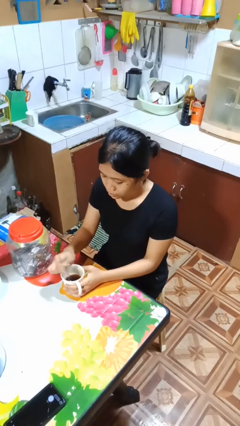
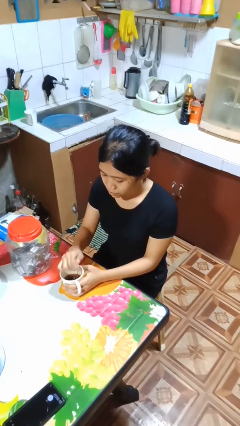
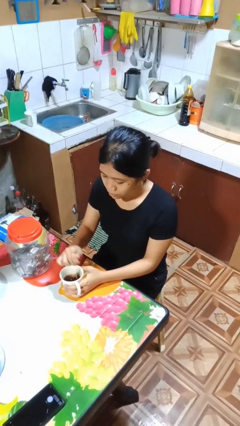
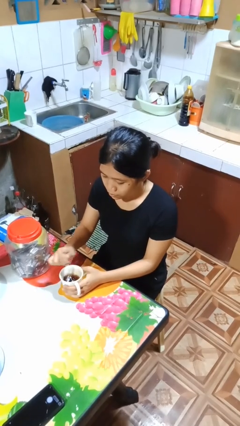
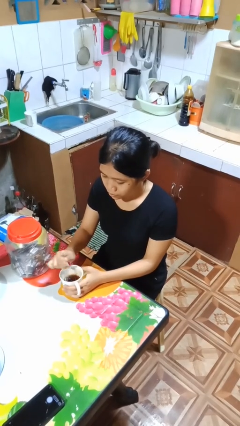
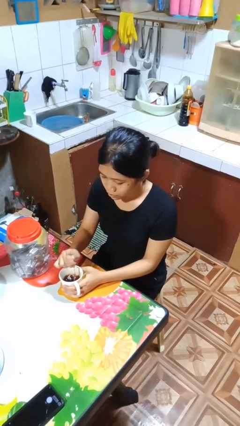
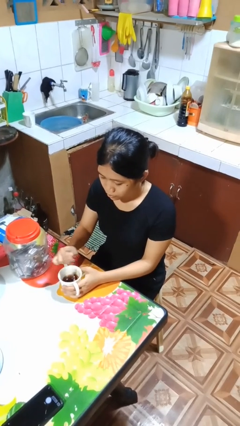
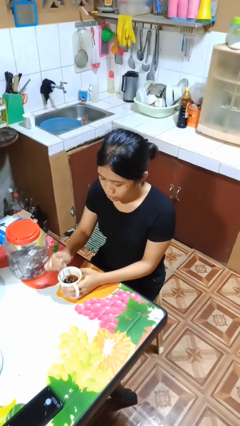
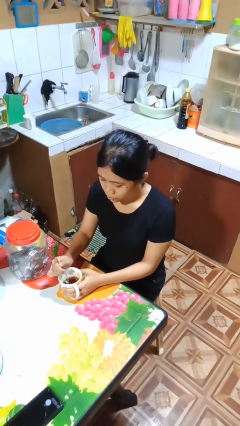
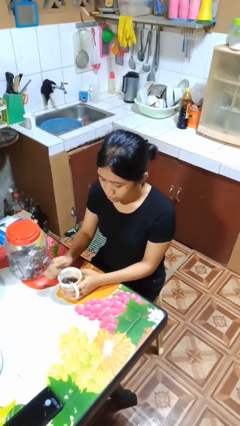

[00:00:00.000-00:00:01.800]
person stirs mug

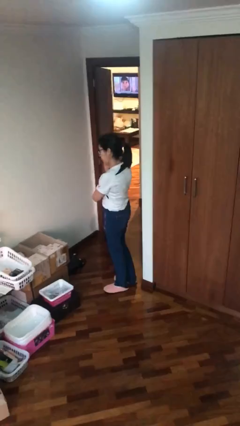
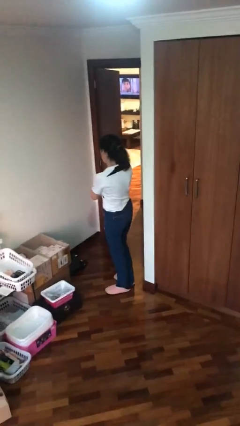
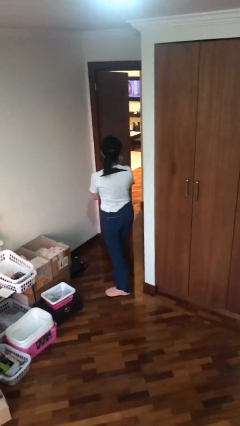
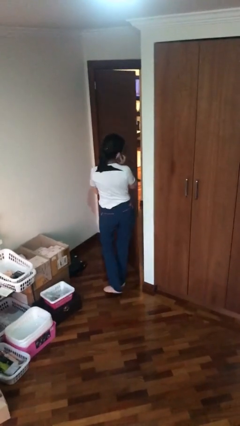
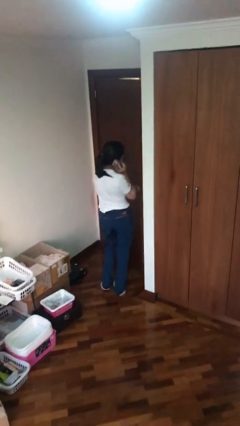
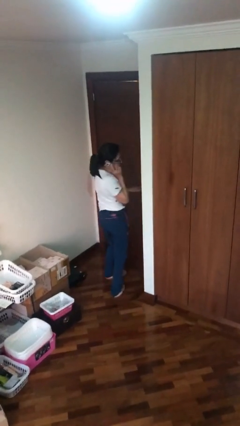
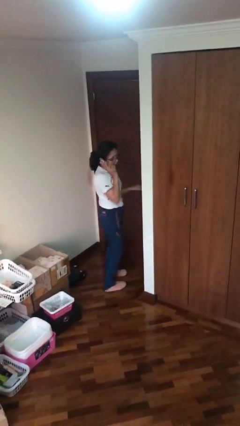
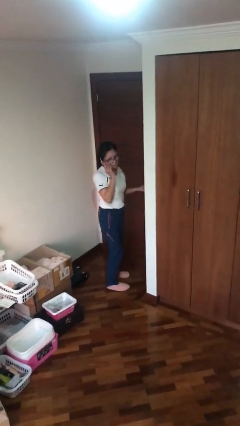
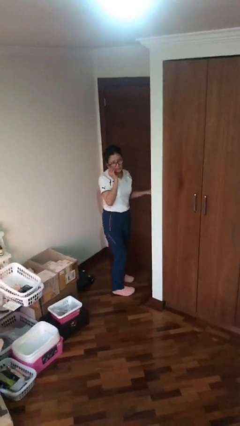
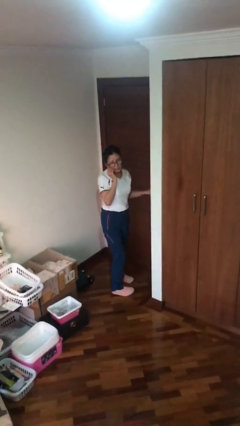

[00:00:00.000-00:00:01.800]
person closes facility door

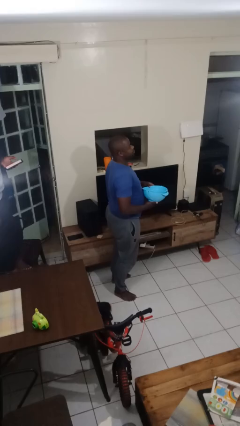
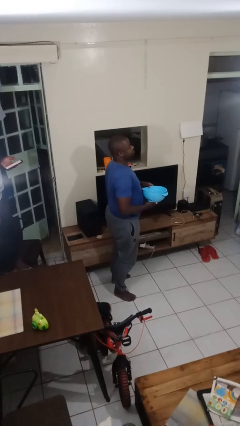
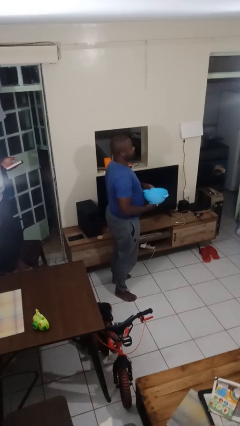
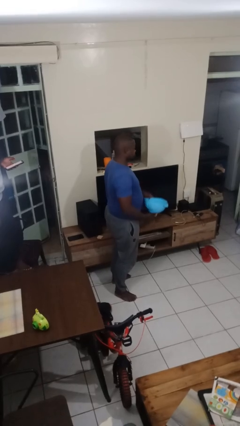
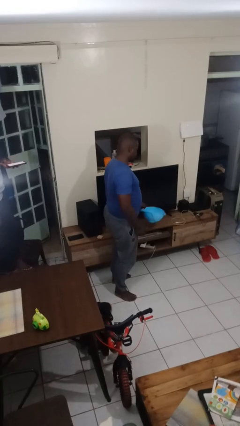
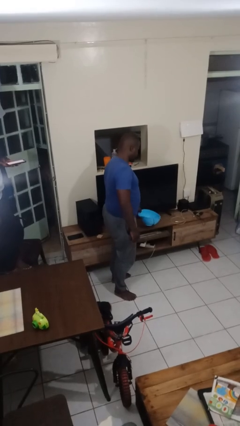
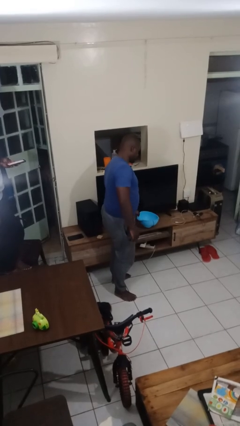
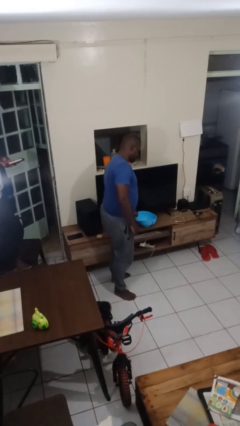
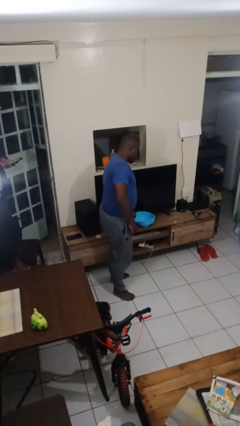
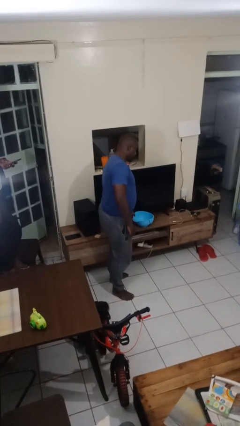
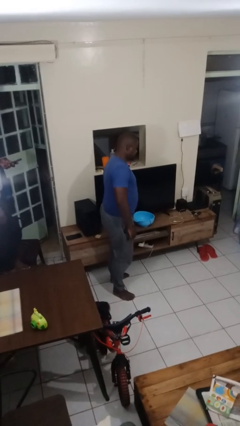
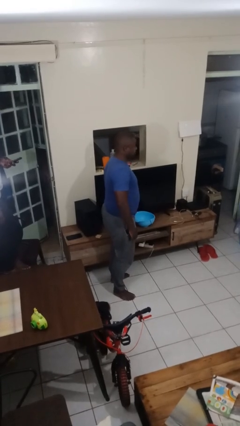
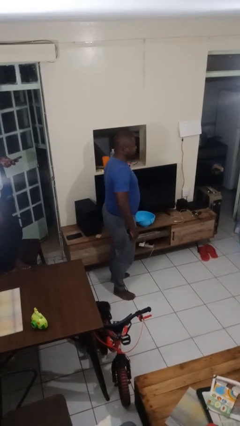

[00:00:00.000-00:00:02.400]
person puts down object on countertop

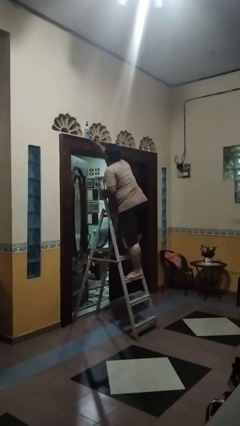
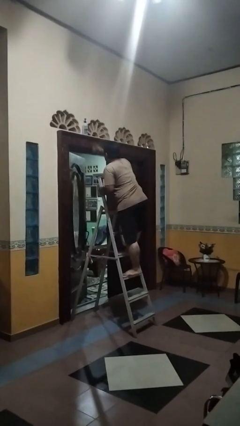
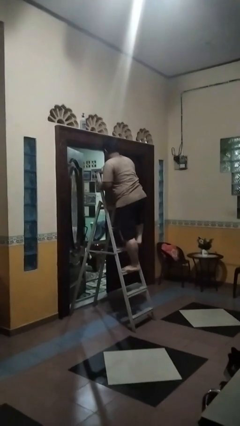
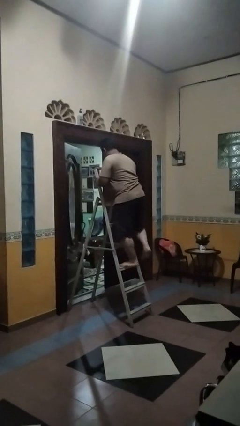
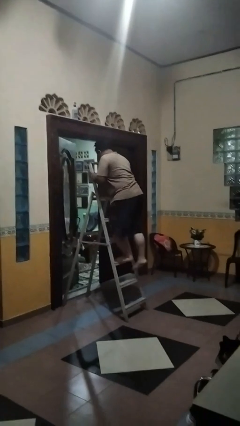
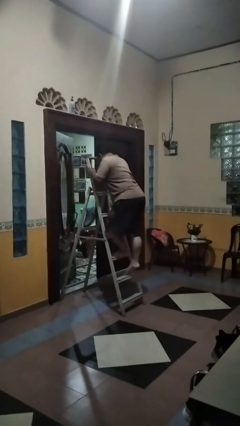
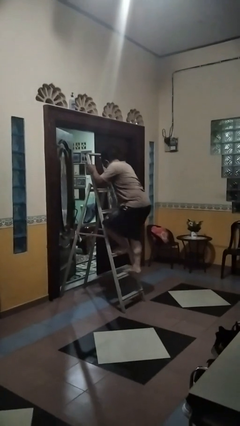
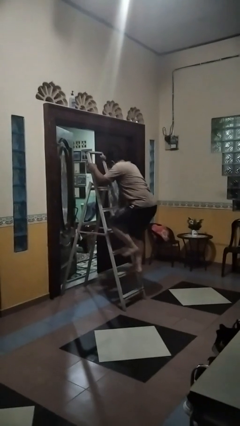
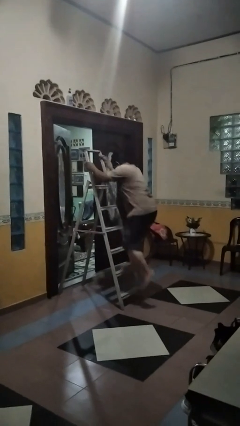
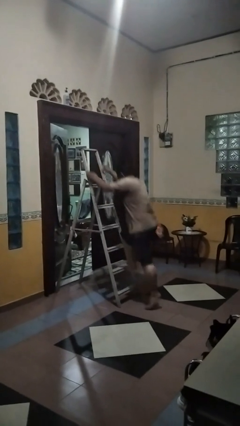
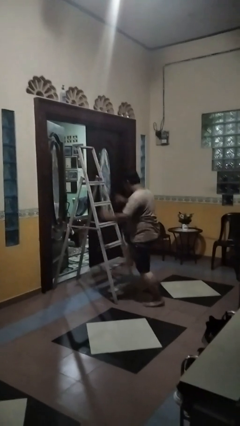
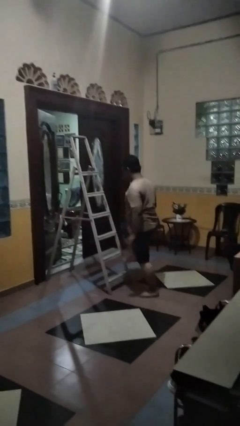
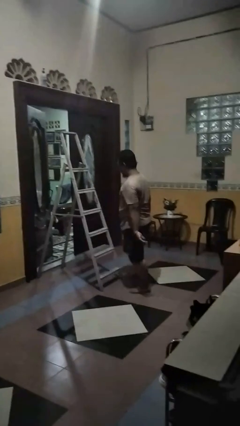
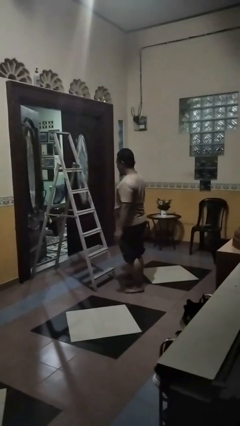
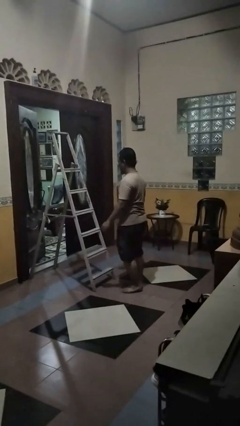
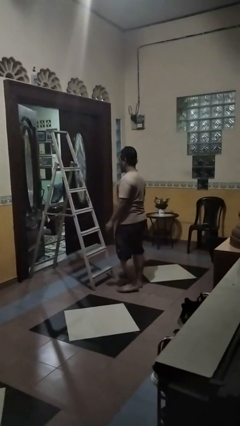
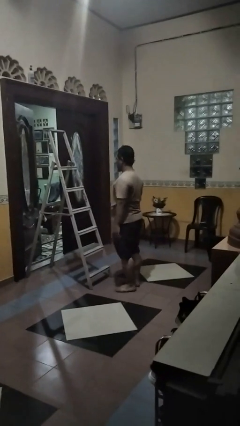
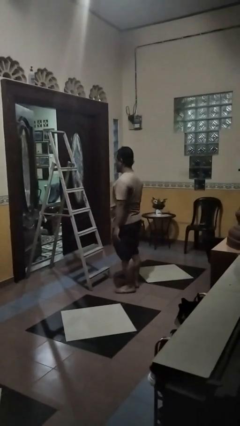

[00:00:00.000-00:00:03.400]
person climbs down ladder

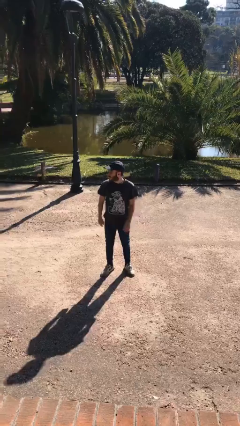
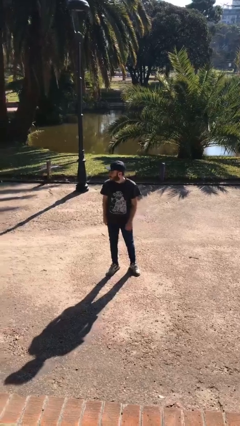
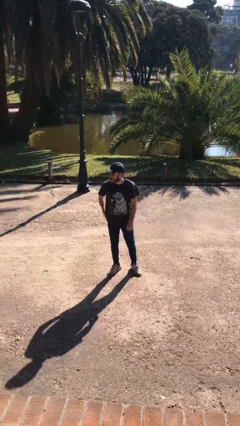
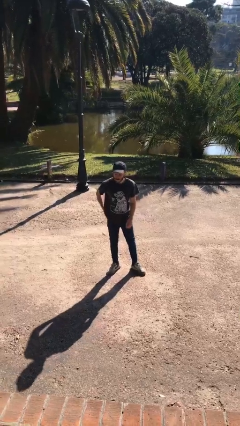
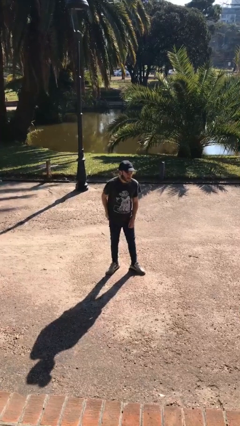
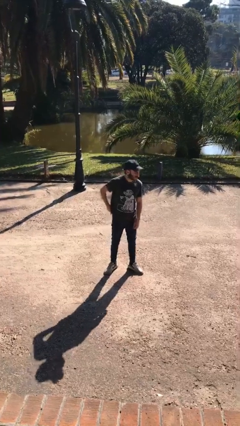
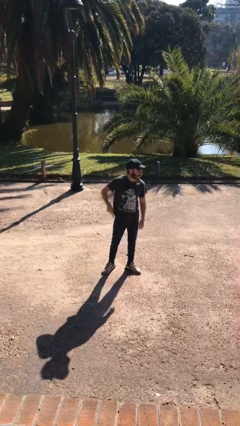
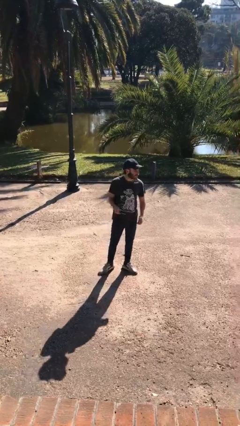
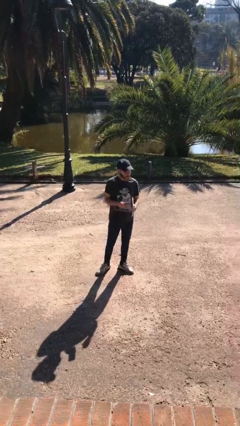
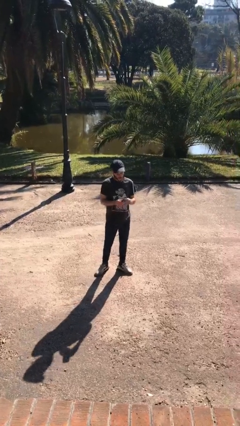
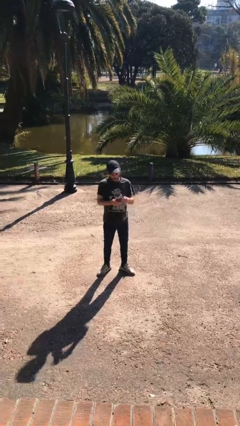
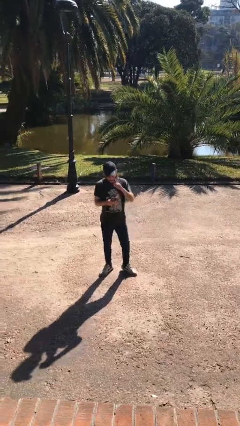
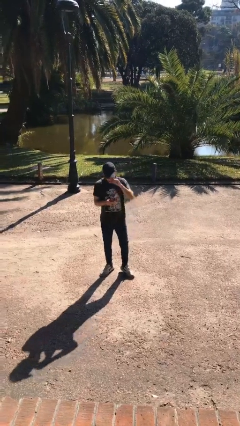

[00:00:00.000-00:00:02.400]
person takes phone from pocket

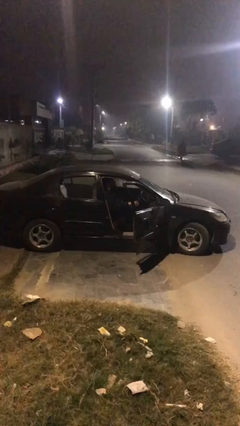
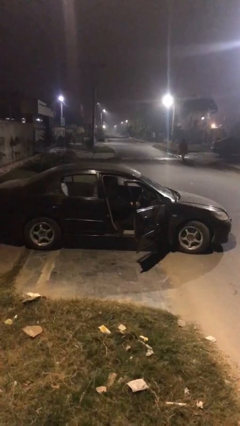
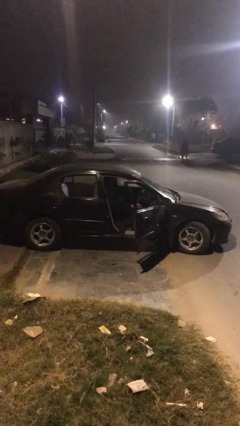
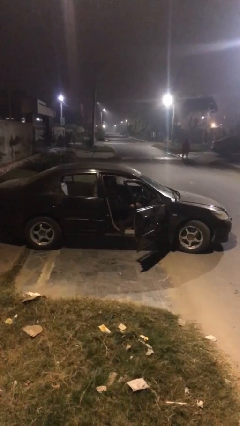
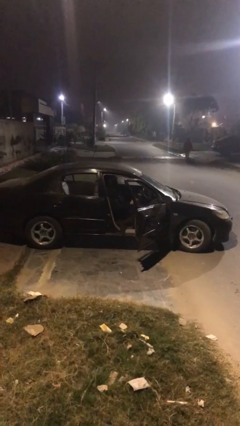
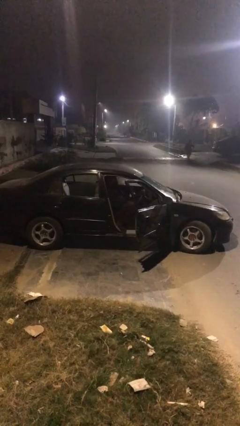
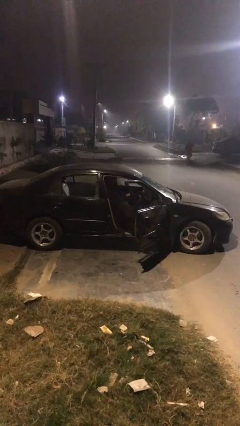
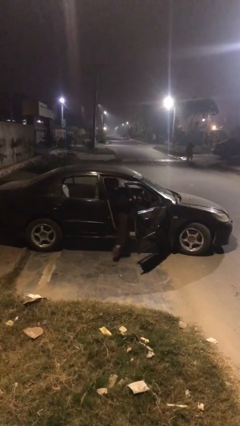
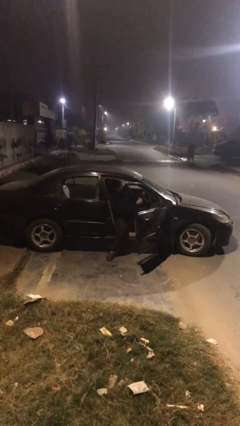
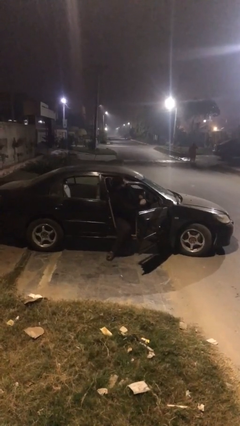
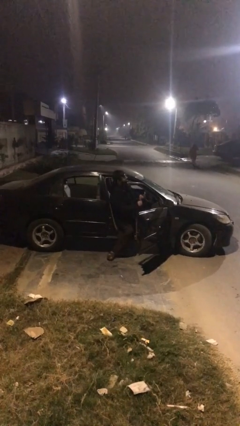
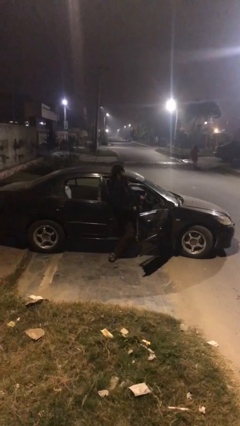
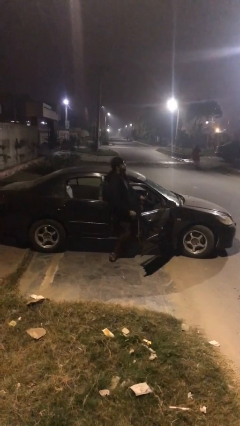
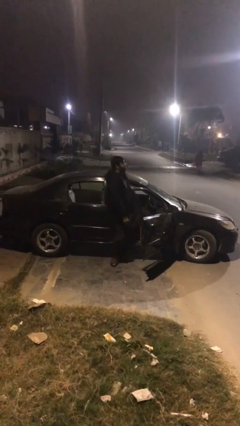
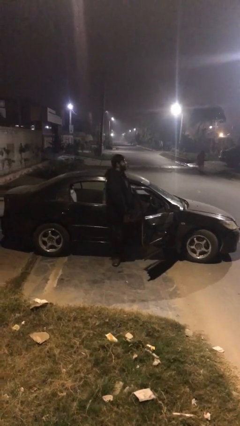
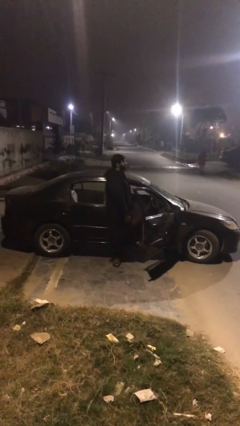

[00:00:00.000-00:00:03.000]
person exits car

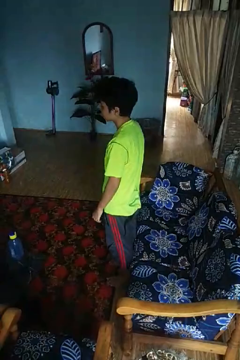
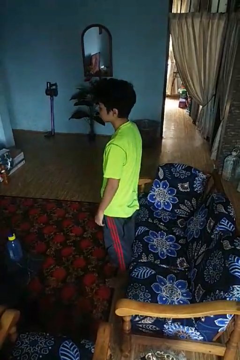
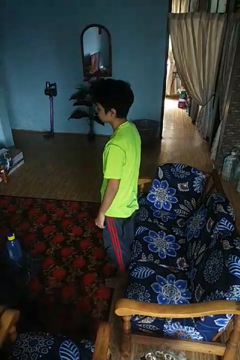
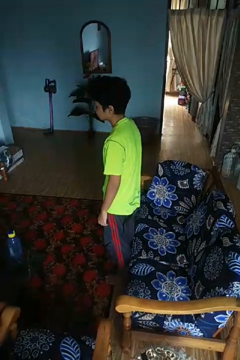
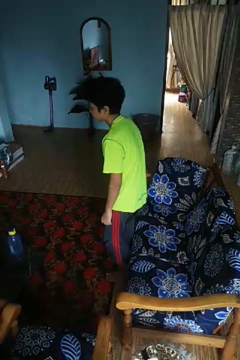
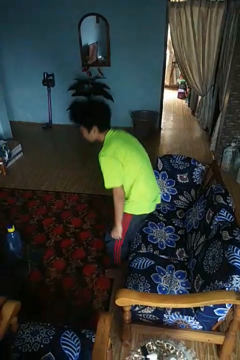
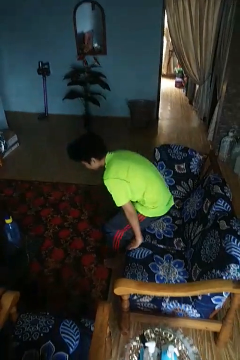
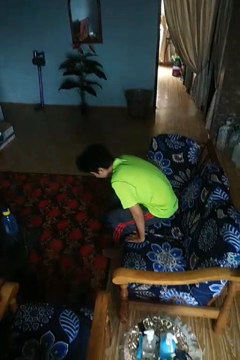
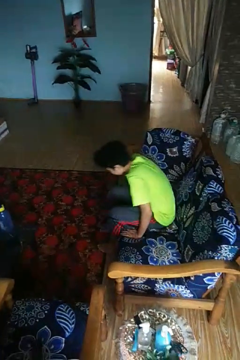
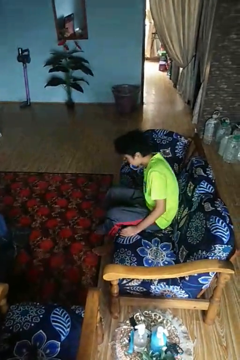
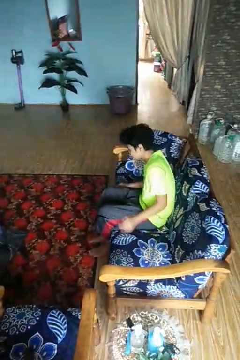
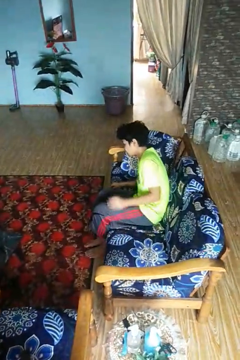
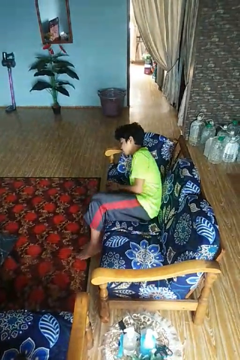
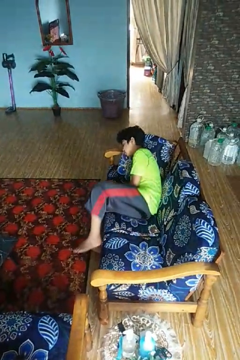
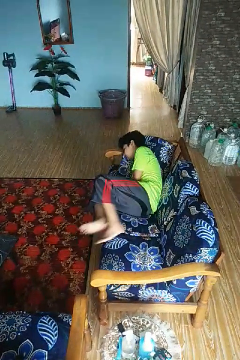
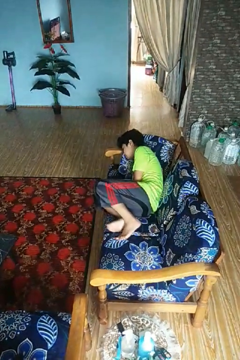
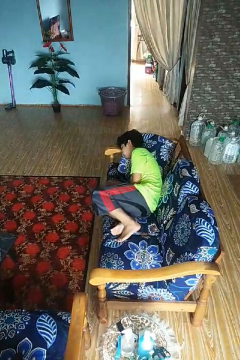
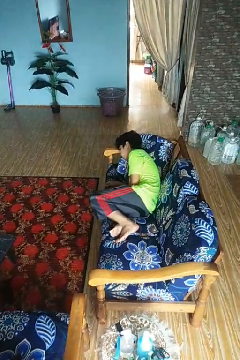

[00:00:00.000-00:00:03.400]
person lies down on couch
